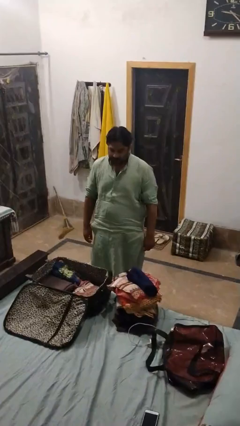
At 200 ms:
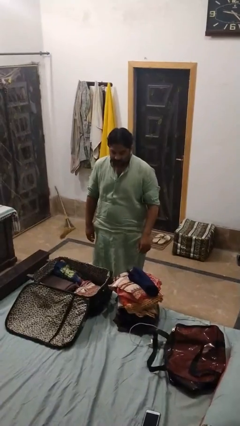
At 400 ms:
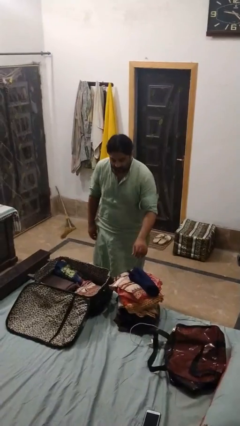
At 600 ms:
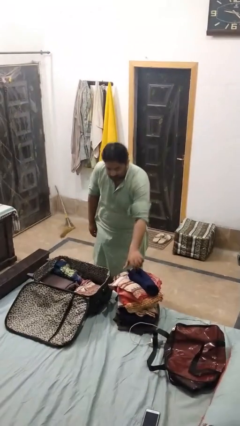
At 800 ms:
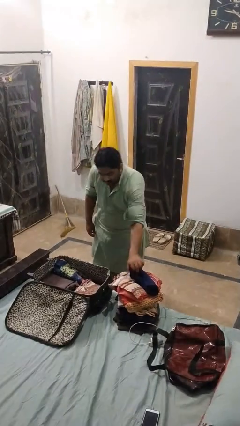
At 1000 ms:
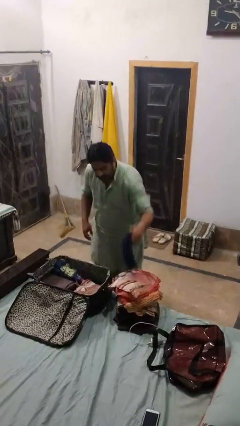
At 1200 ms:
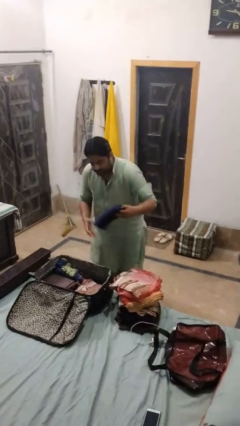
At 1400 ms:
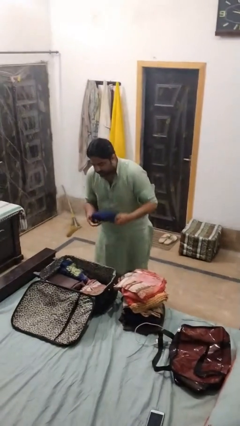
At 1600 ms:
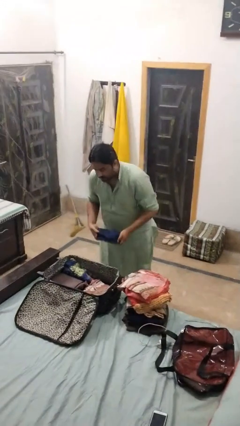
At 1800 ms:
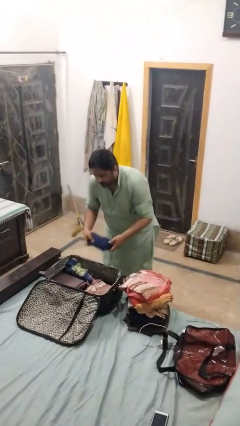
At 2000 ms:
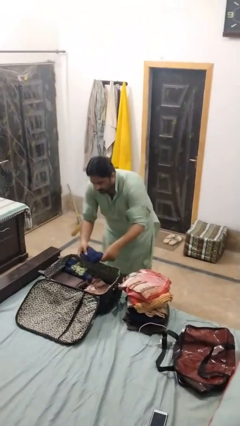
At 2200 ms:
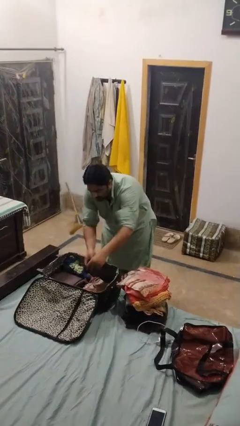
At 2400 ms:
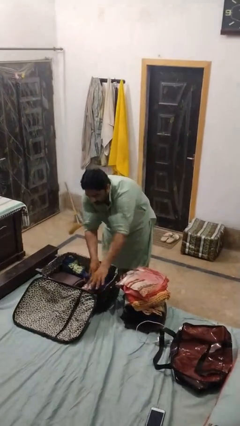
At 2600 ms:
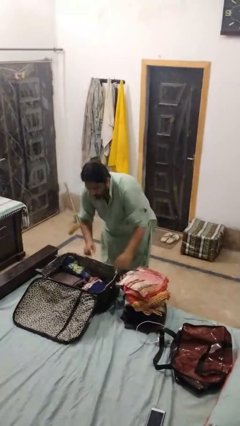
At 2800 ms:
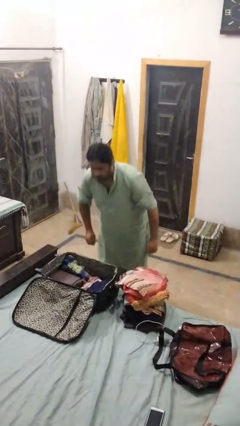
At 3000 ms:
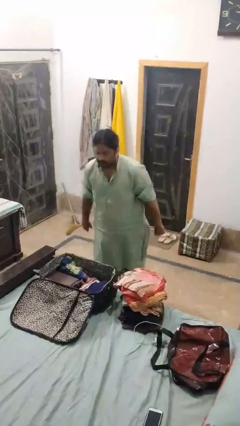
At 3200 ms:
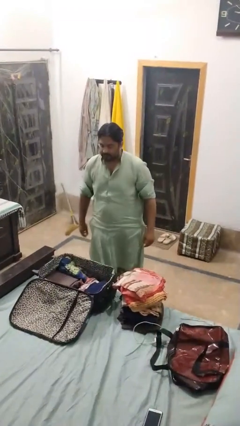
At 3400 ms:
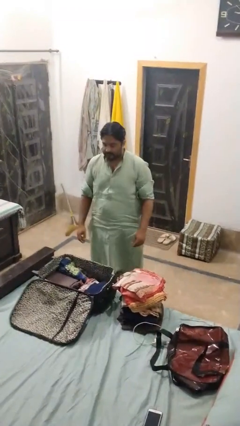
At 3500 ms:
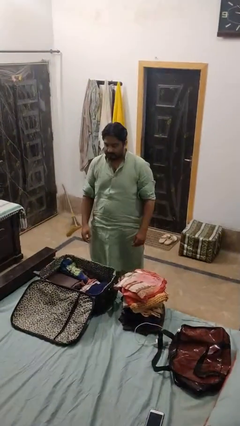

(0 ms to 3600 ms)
person loads clothes into suitcase

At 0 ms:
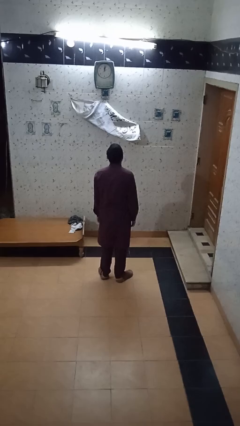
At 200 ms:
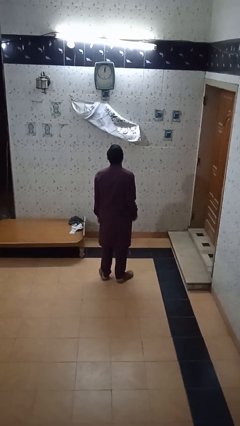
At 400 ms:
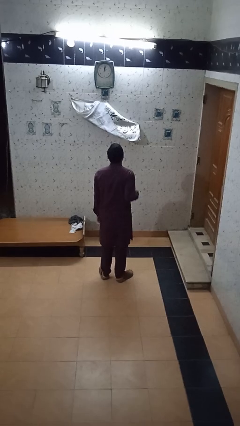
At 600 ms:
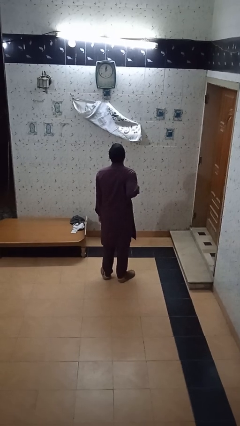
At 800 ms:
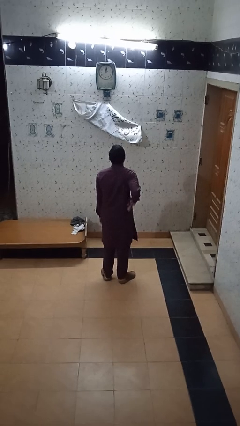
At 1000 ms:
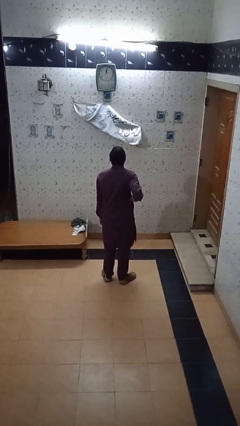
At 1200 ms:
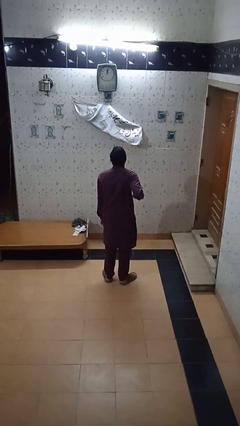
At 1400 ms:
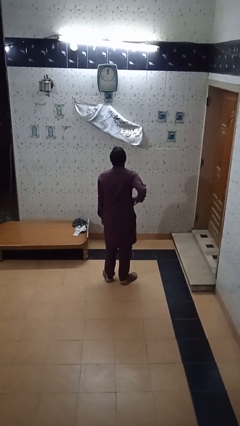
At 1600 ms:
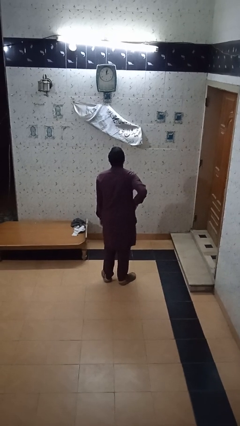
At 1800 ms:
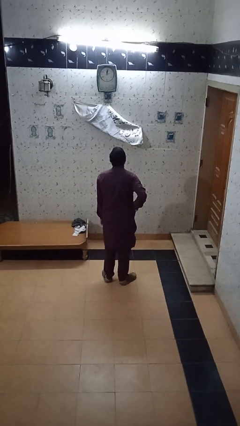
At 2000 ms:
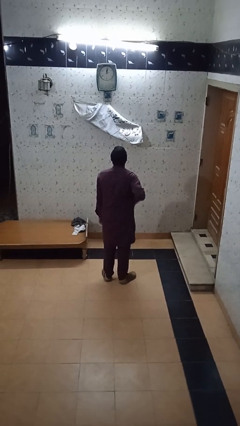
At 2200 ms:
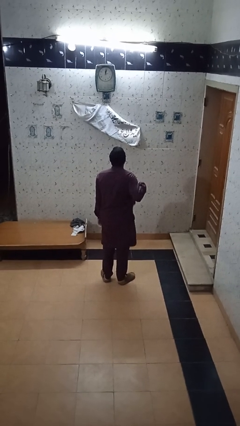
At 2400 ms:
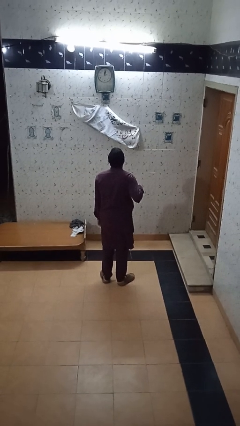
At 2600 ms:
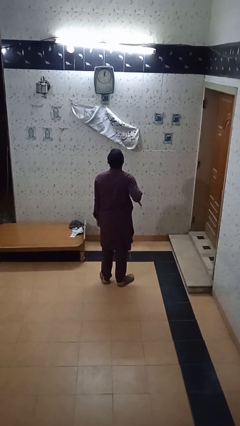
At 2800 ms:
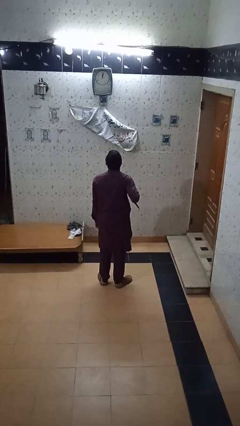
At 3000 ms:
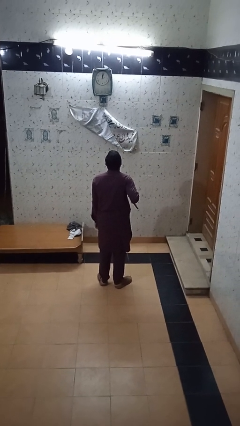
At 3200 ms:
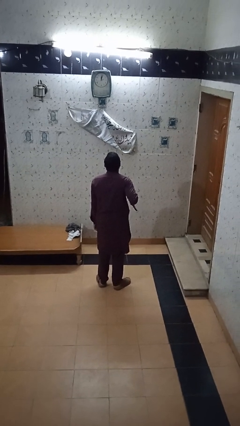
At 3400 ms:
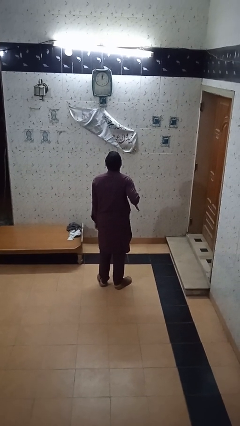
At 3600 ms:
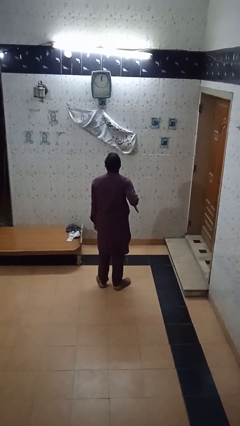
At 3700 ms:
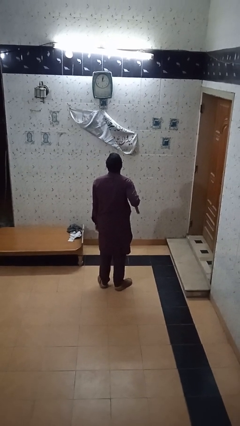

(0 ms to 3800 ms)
person takes phone from pocket

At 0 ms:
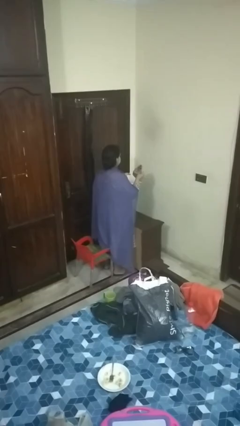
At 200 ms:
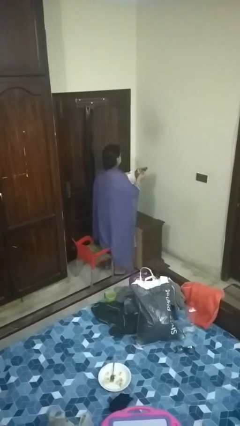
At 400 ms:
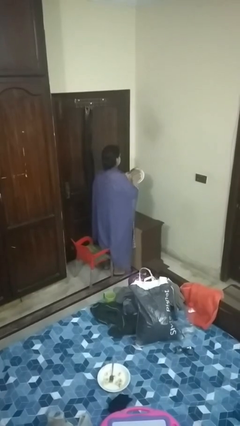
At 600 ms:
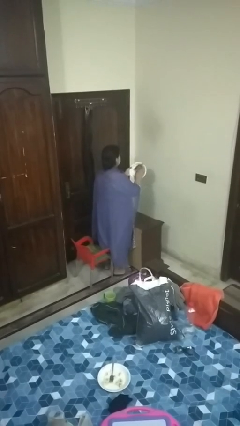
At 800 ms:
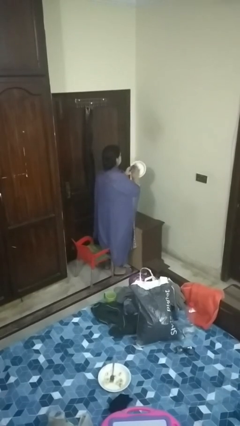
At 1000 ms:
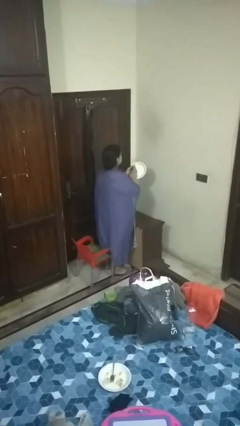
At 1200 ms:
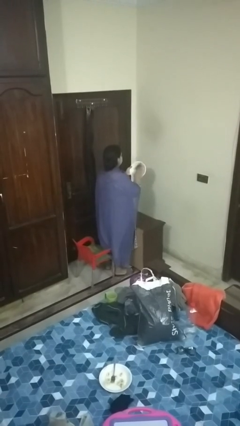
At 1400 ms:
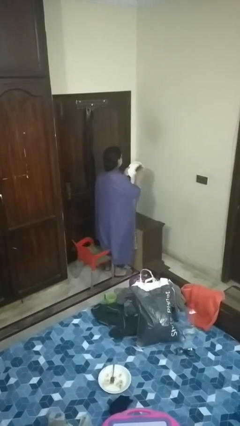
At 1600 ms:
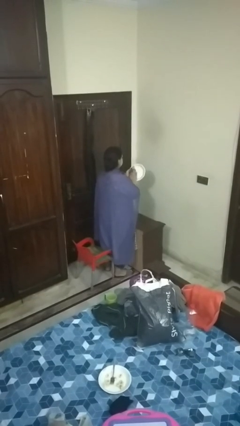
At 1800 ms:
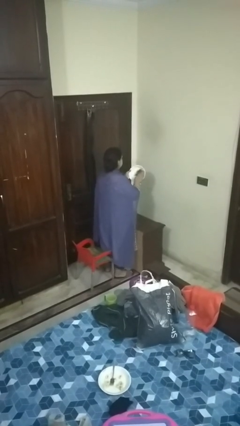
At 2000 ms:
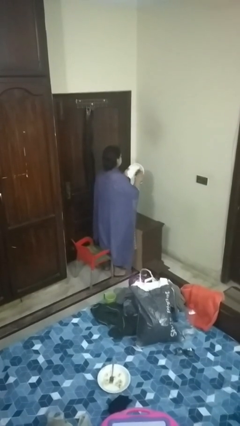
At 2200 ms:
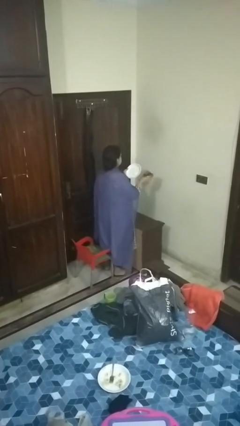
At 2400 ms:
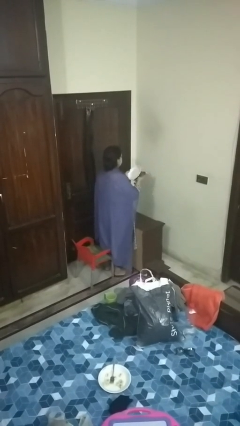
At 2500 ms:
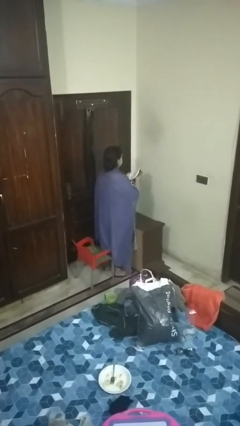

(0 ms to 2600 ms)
person dries dish

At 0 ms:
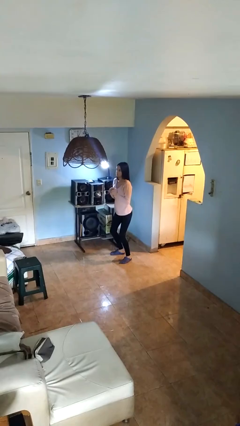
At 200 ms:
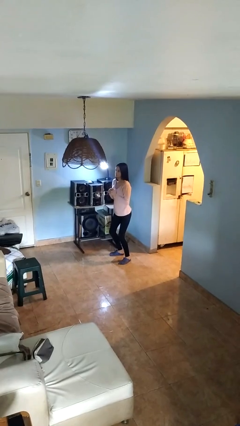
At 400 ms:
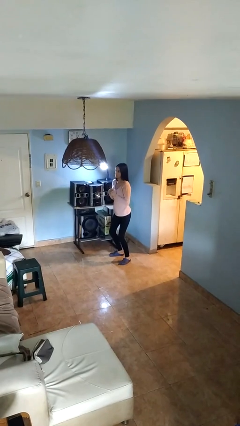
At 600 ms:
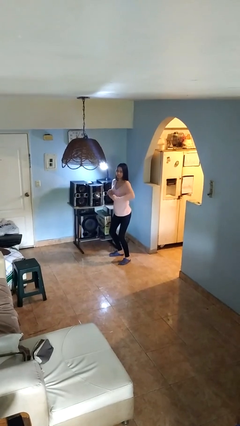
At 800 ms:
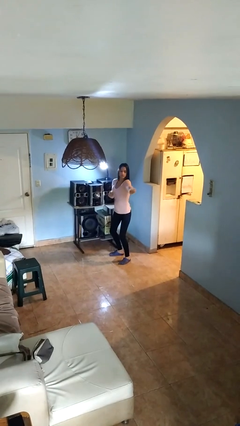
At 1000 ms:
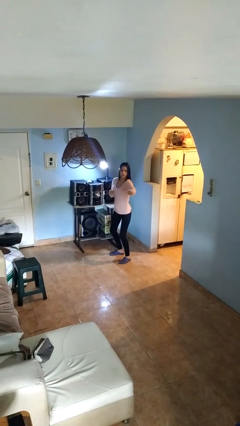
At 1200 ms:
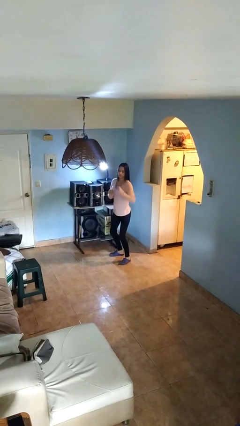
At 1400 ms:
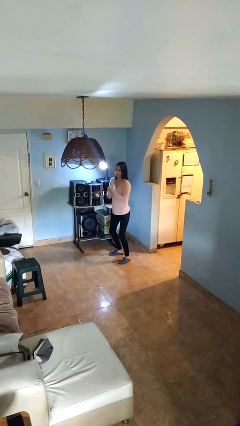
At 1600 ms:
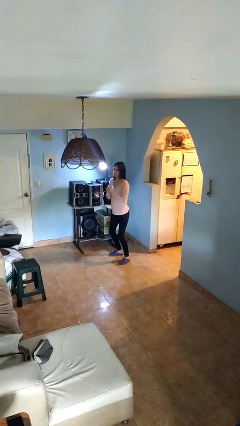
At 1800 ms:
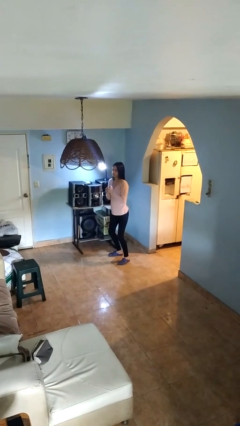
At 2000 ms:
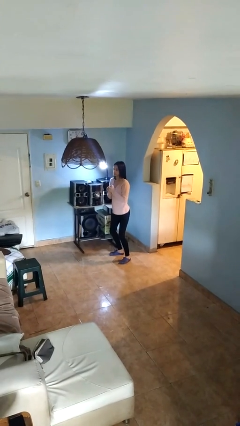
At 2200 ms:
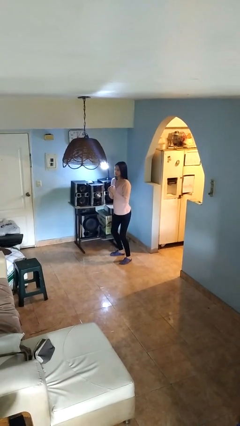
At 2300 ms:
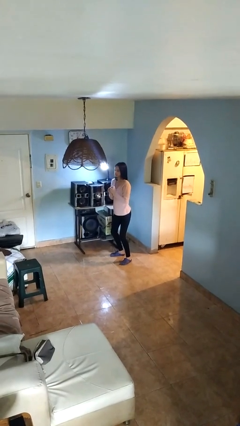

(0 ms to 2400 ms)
person karate chop

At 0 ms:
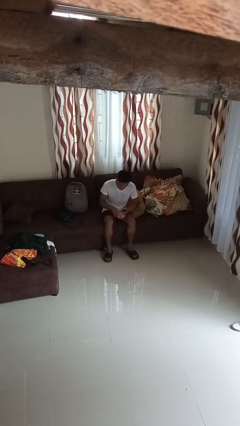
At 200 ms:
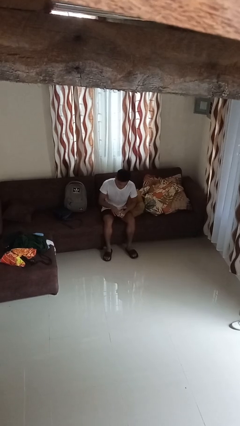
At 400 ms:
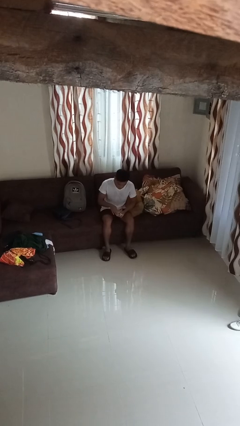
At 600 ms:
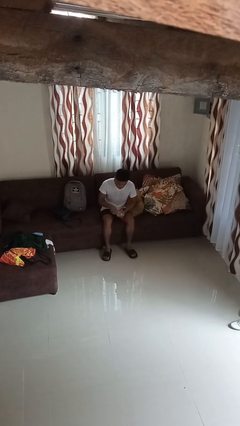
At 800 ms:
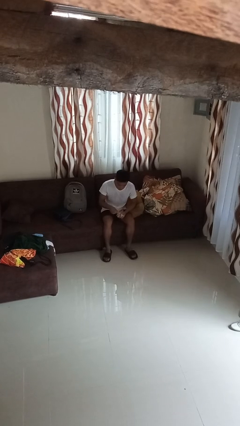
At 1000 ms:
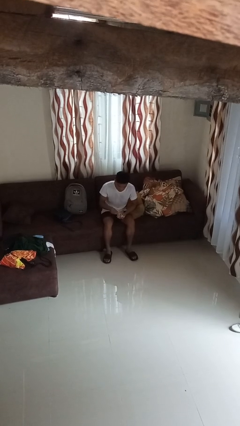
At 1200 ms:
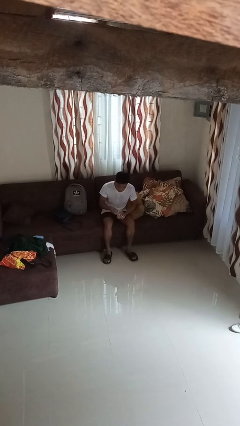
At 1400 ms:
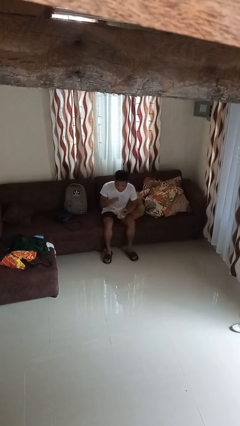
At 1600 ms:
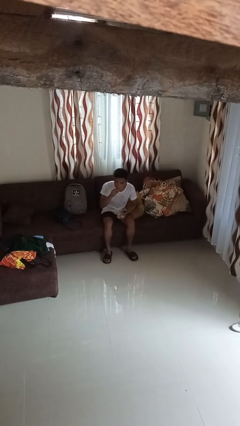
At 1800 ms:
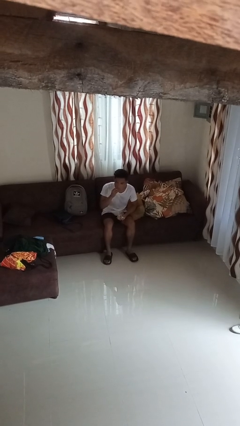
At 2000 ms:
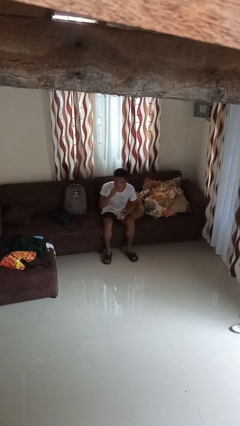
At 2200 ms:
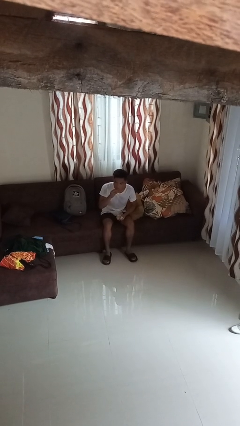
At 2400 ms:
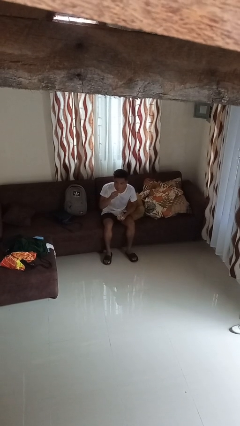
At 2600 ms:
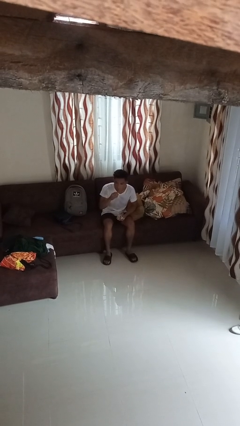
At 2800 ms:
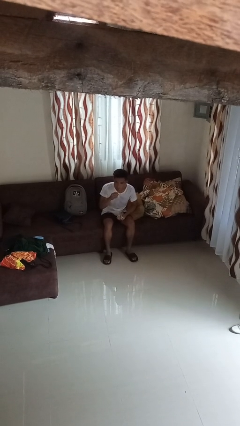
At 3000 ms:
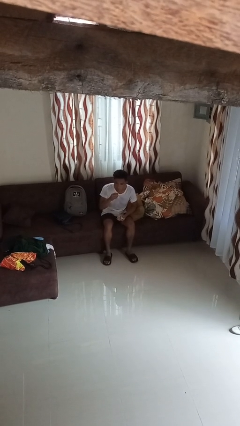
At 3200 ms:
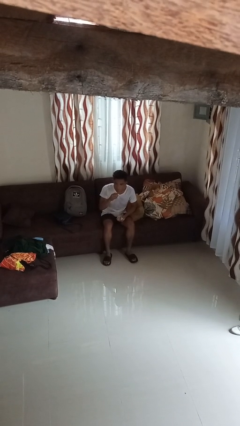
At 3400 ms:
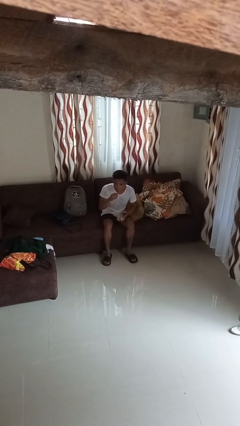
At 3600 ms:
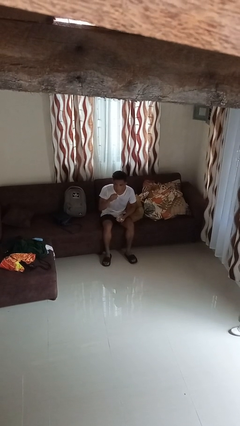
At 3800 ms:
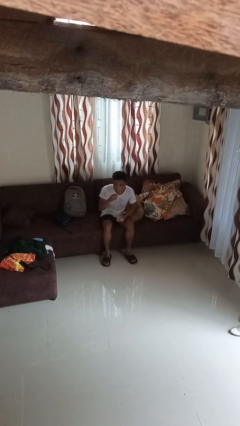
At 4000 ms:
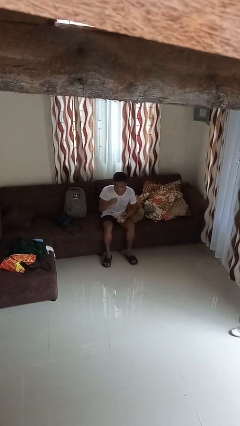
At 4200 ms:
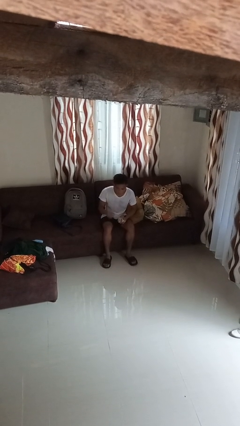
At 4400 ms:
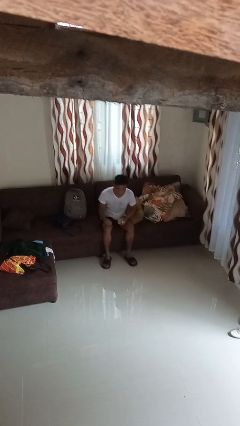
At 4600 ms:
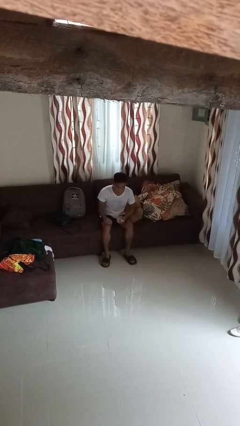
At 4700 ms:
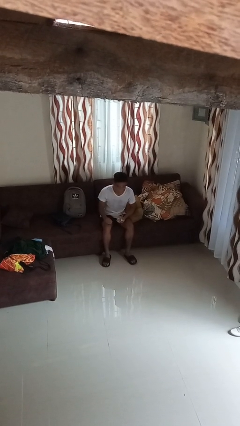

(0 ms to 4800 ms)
person eats snack from bag

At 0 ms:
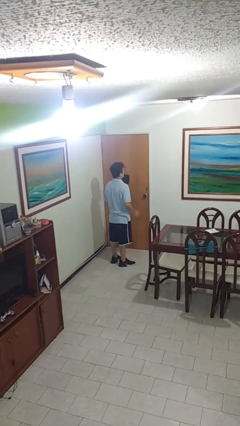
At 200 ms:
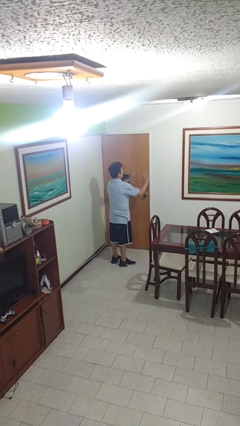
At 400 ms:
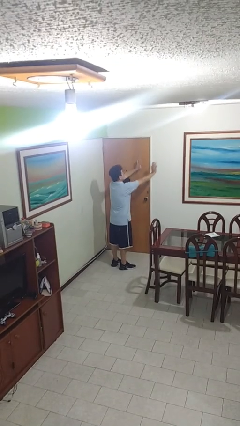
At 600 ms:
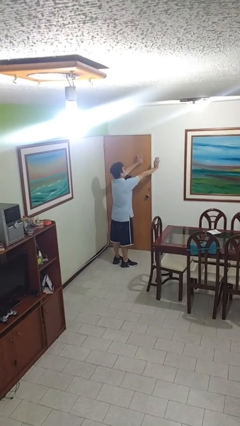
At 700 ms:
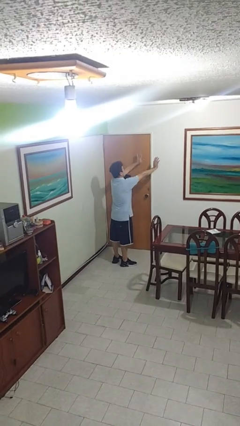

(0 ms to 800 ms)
person gestures stop
